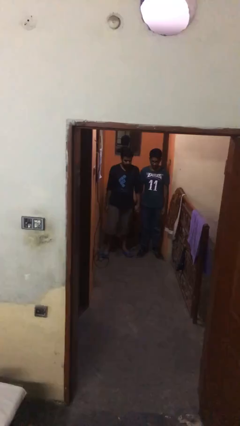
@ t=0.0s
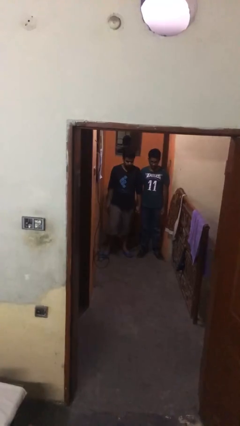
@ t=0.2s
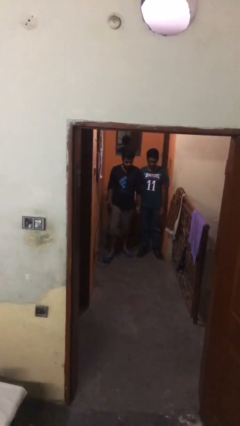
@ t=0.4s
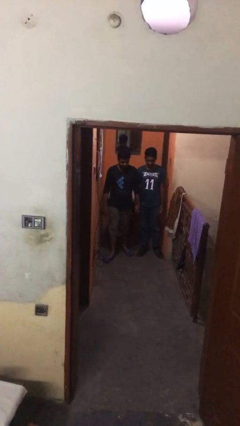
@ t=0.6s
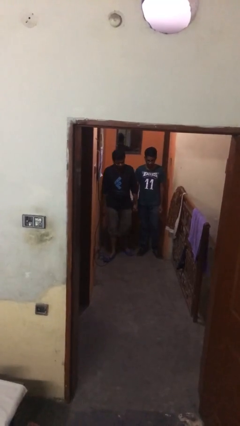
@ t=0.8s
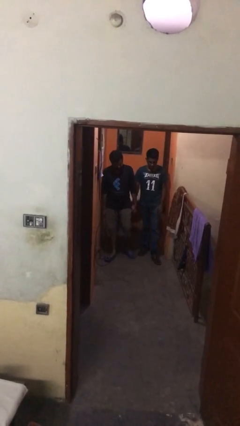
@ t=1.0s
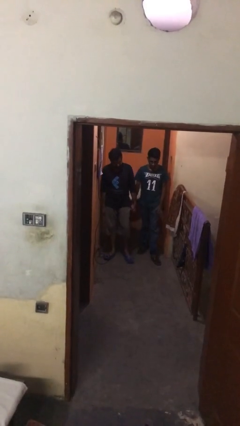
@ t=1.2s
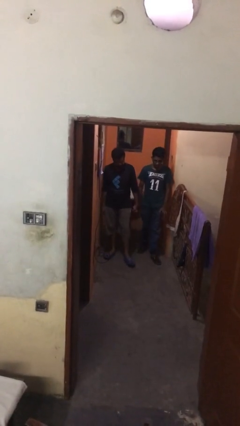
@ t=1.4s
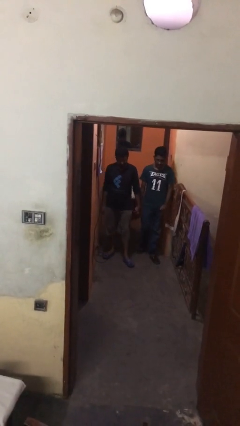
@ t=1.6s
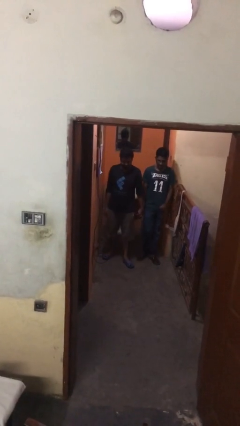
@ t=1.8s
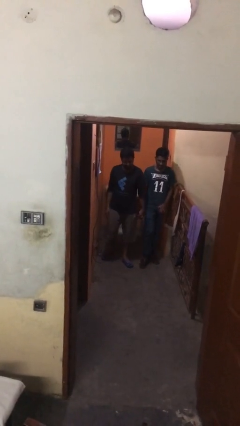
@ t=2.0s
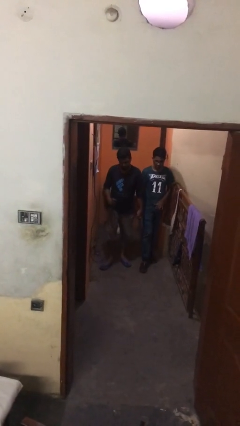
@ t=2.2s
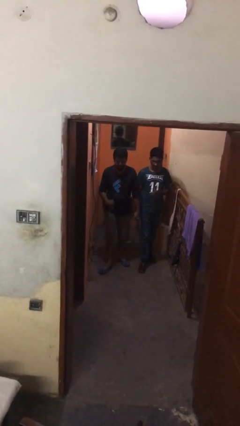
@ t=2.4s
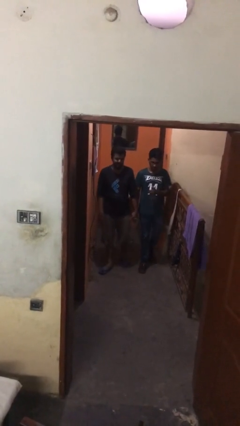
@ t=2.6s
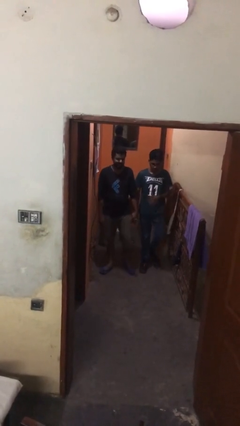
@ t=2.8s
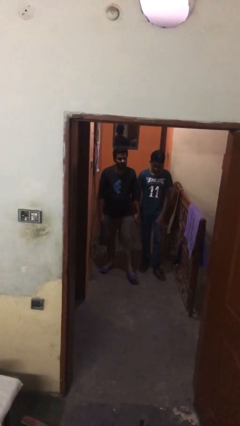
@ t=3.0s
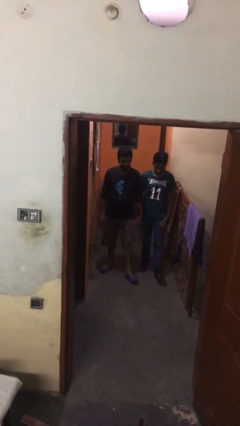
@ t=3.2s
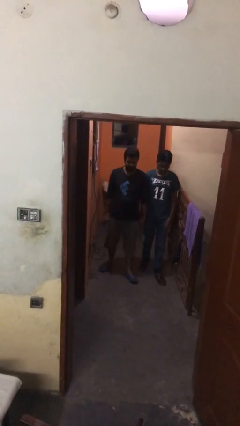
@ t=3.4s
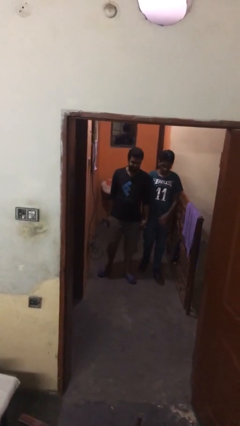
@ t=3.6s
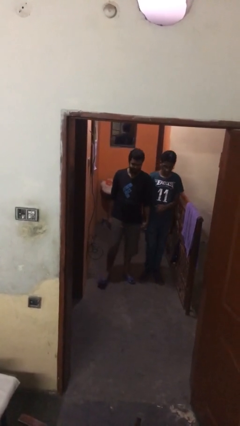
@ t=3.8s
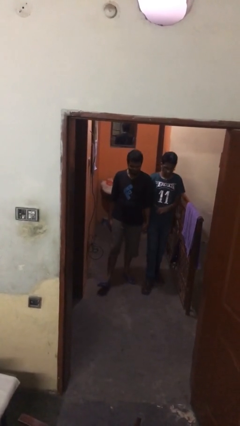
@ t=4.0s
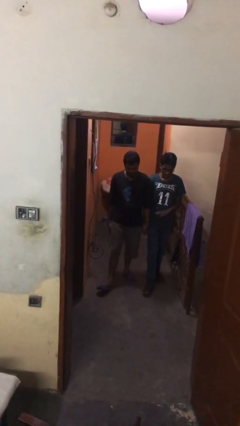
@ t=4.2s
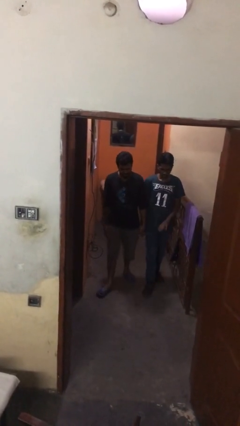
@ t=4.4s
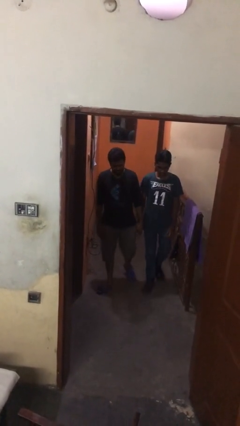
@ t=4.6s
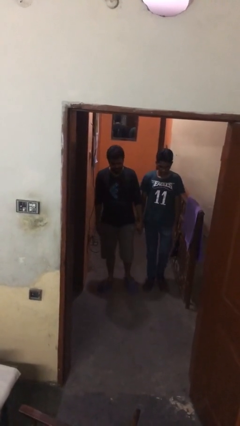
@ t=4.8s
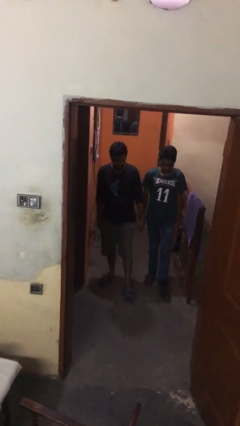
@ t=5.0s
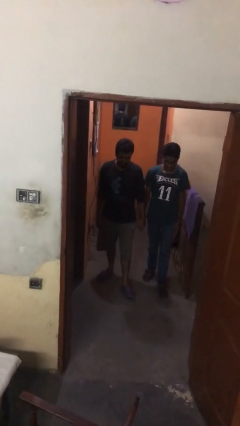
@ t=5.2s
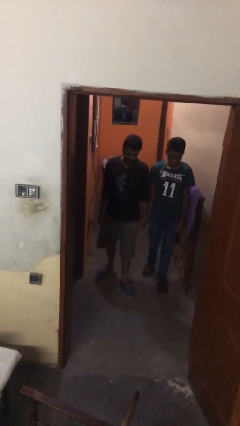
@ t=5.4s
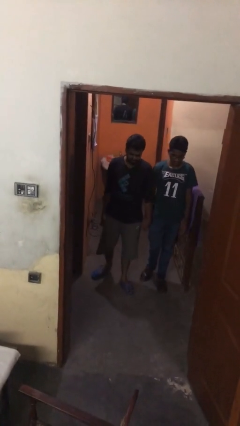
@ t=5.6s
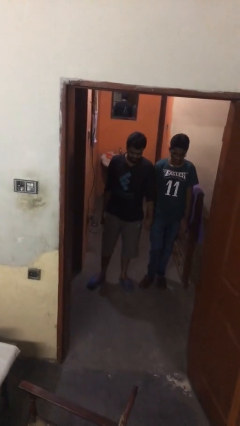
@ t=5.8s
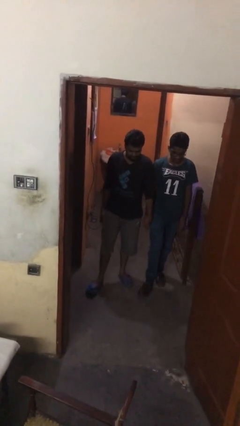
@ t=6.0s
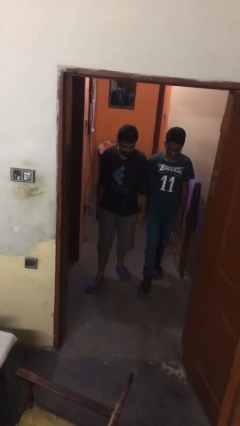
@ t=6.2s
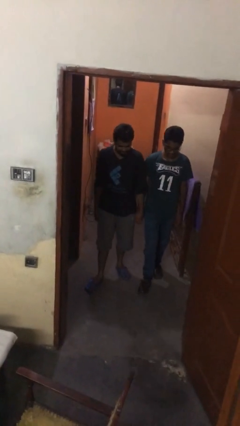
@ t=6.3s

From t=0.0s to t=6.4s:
person holds hand

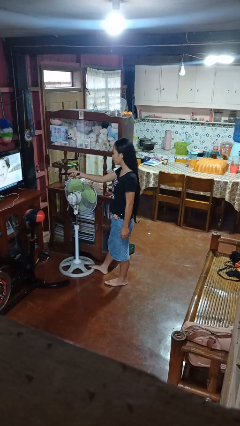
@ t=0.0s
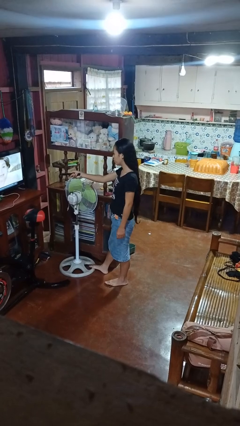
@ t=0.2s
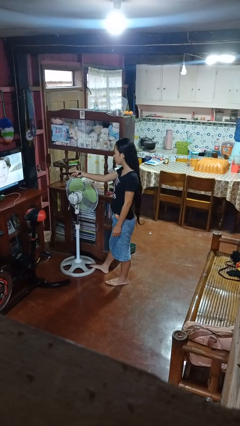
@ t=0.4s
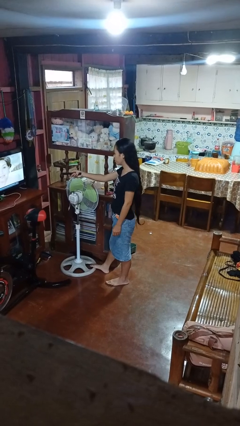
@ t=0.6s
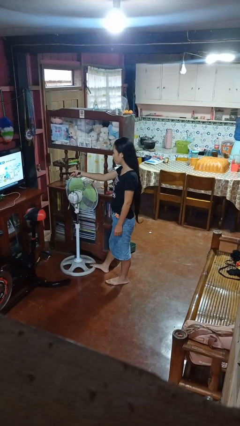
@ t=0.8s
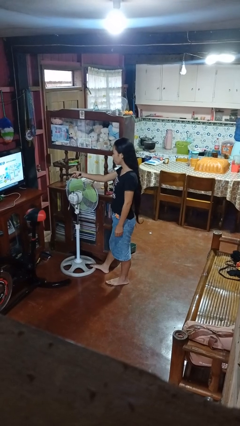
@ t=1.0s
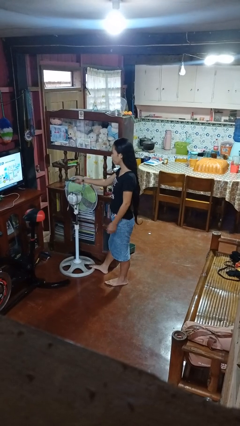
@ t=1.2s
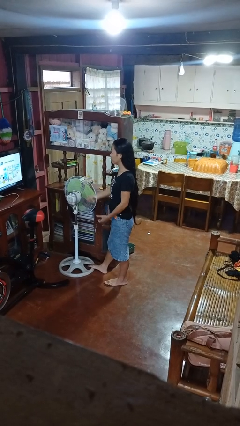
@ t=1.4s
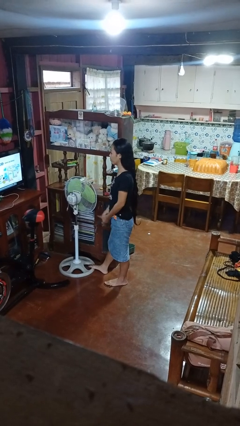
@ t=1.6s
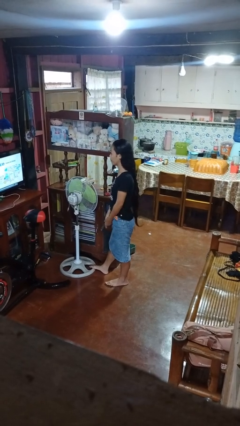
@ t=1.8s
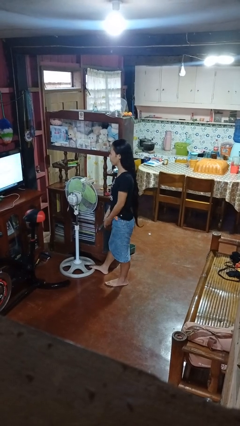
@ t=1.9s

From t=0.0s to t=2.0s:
person uses television remote

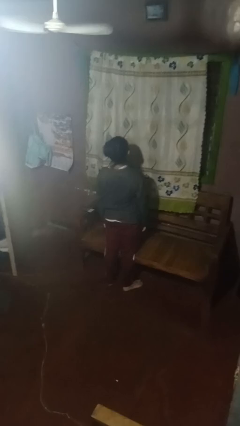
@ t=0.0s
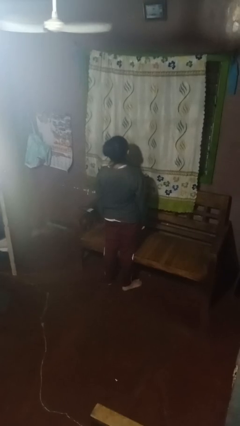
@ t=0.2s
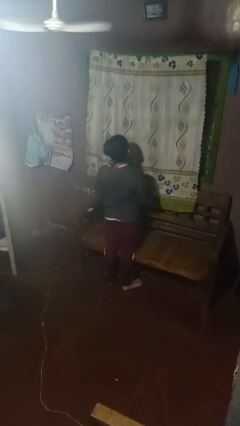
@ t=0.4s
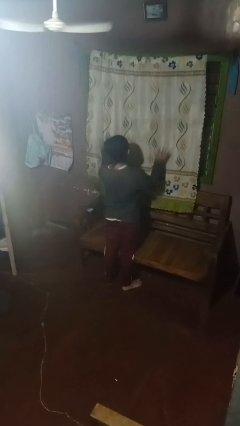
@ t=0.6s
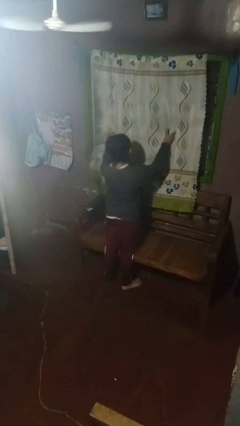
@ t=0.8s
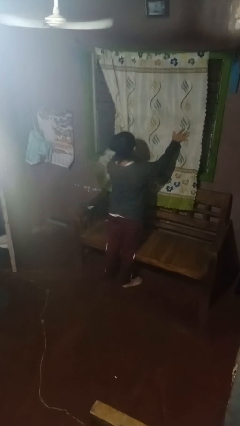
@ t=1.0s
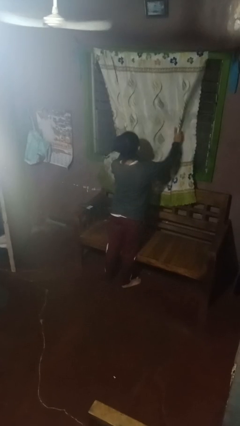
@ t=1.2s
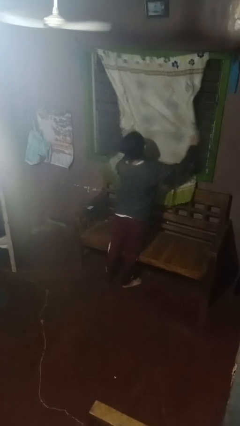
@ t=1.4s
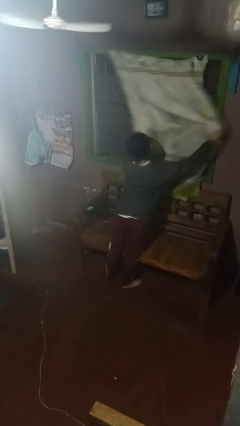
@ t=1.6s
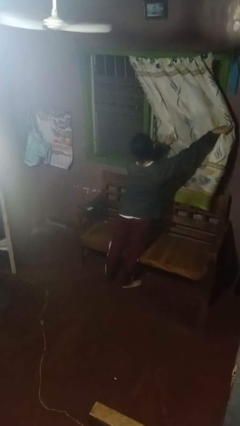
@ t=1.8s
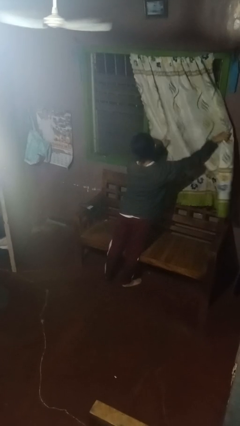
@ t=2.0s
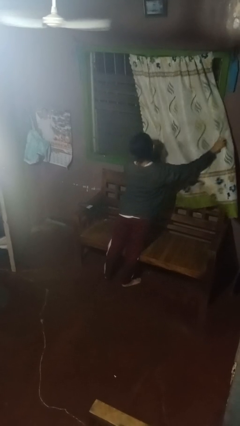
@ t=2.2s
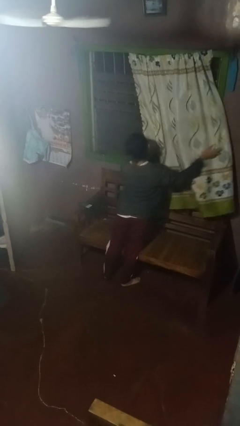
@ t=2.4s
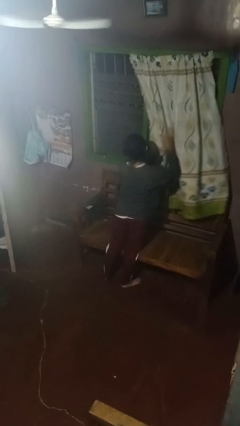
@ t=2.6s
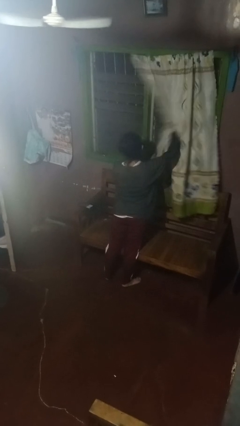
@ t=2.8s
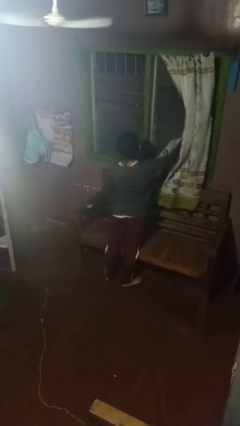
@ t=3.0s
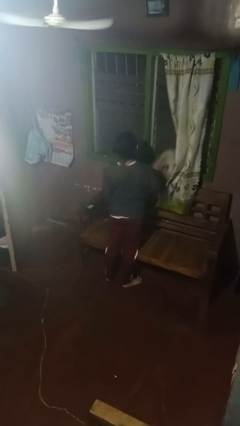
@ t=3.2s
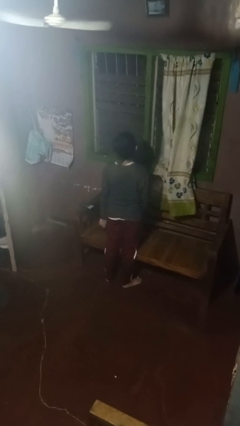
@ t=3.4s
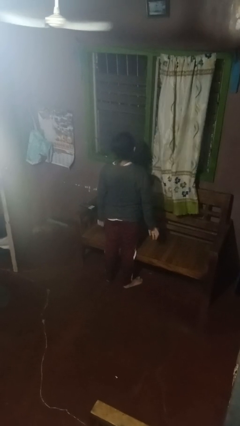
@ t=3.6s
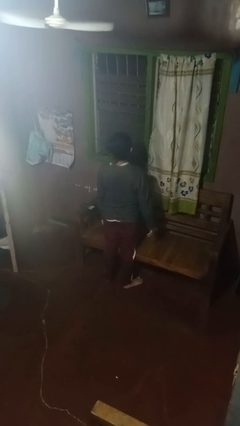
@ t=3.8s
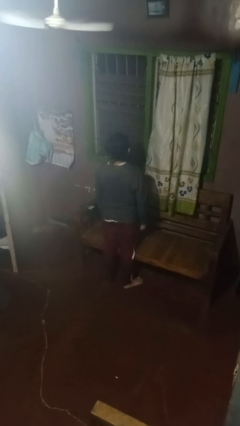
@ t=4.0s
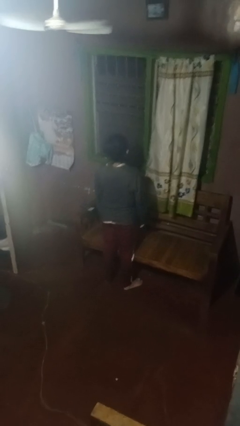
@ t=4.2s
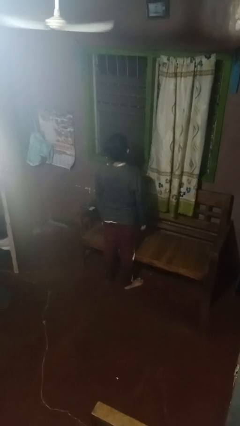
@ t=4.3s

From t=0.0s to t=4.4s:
person opens curtains

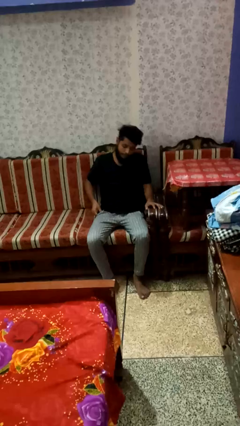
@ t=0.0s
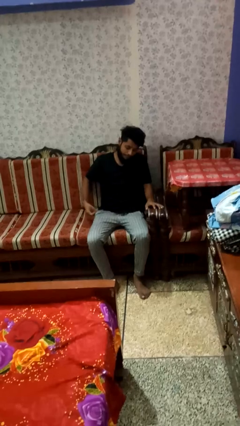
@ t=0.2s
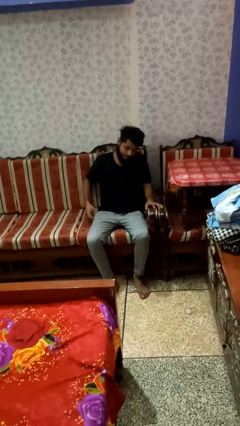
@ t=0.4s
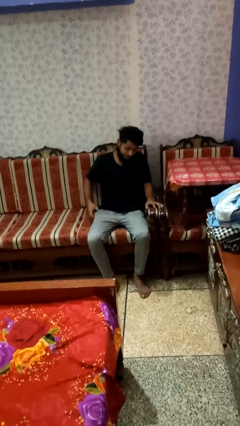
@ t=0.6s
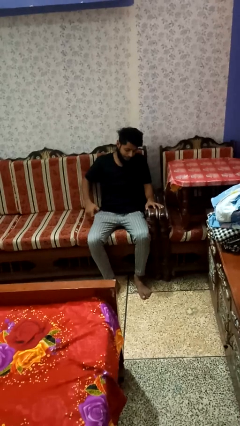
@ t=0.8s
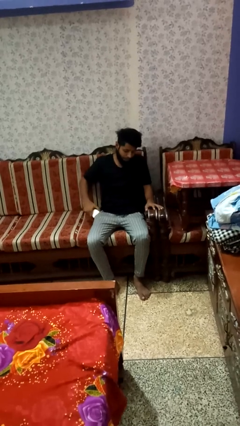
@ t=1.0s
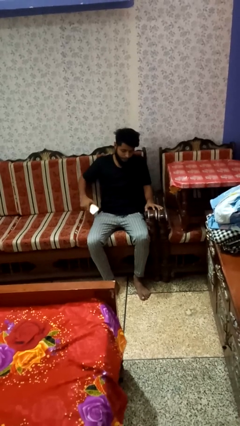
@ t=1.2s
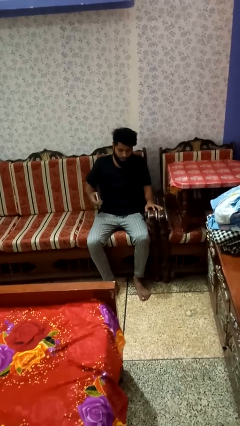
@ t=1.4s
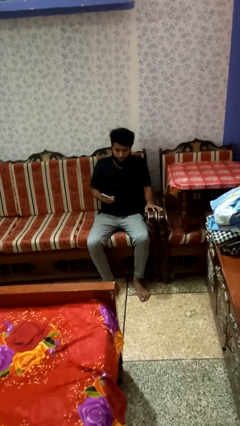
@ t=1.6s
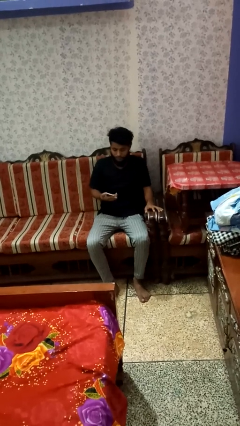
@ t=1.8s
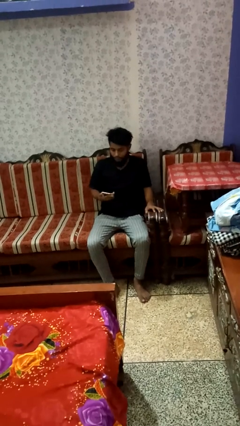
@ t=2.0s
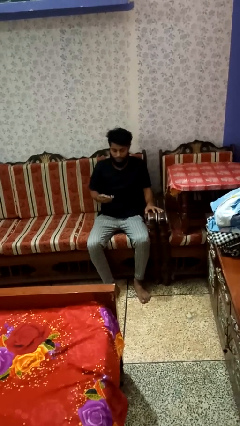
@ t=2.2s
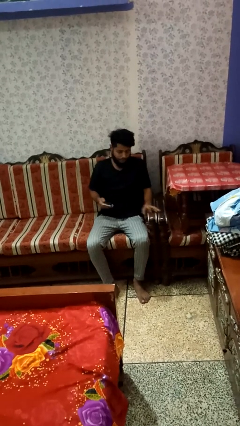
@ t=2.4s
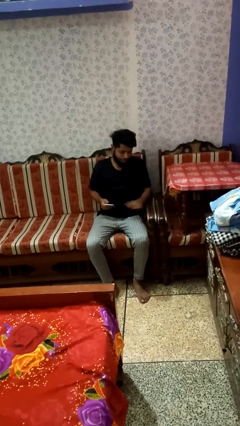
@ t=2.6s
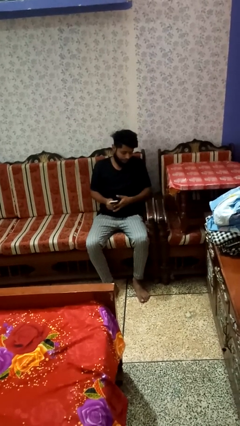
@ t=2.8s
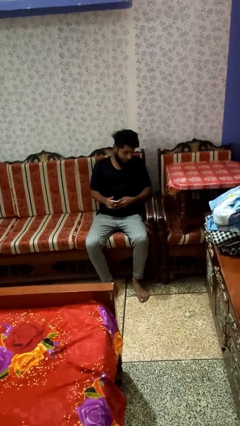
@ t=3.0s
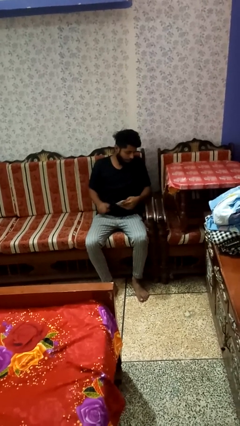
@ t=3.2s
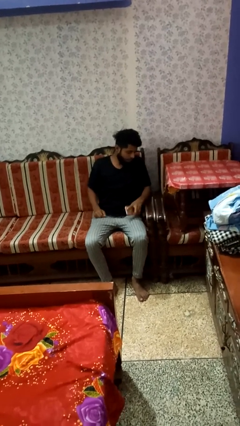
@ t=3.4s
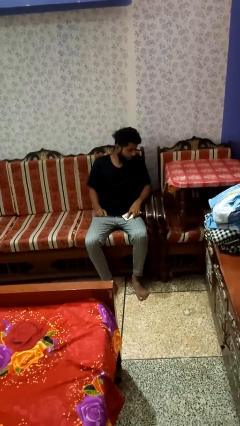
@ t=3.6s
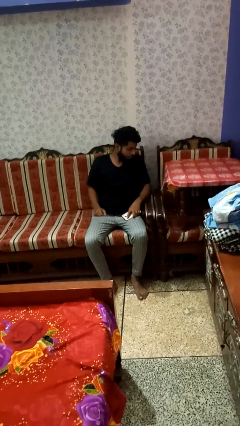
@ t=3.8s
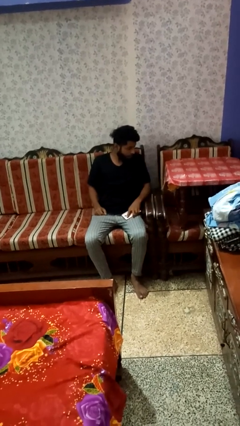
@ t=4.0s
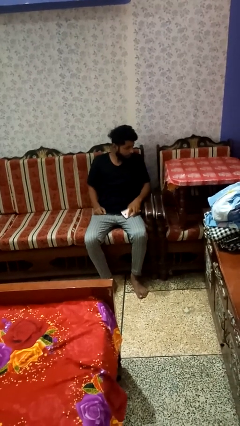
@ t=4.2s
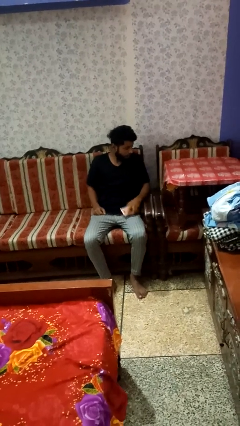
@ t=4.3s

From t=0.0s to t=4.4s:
person takes phone from pocket

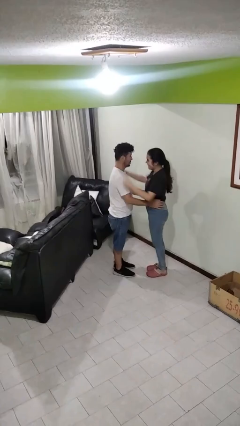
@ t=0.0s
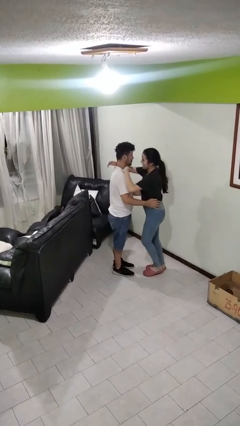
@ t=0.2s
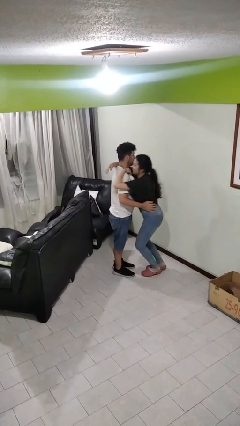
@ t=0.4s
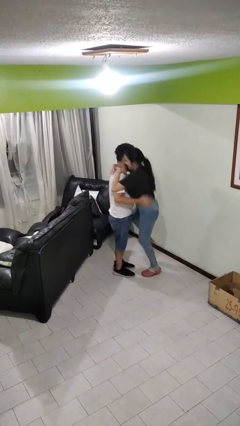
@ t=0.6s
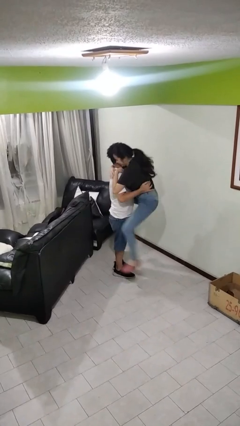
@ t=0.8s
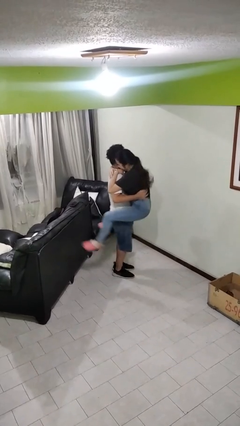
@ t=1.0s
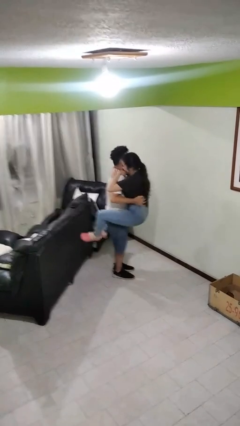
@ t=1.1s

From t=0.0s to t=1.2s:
person picks up person
